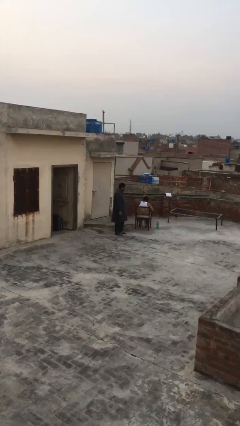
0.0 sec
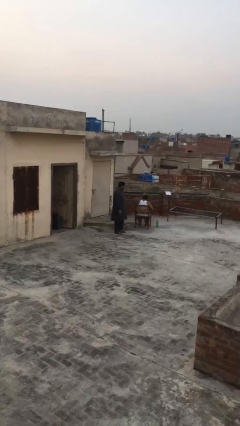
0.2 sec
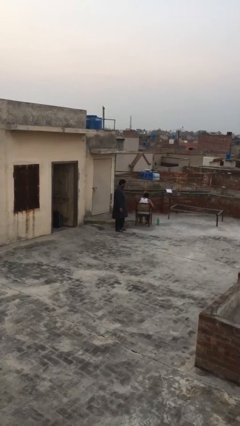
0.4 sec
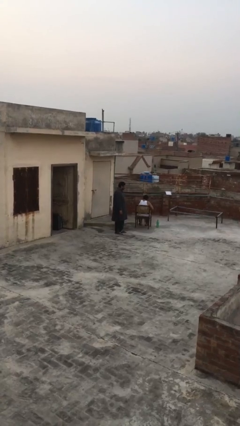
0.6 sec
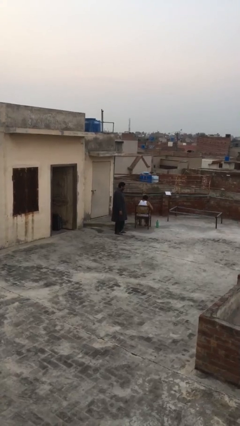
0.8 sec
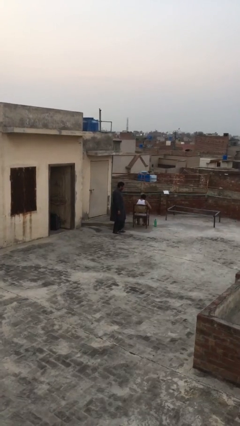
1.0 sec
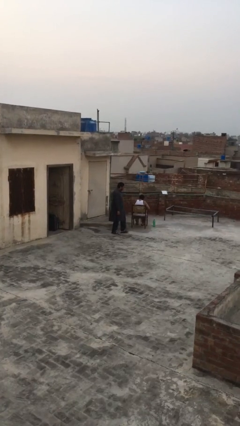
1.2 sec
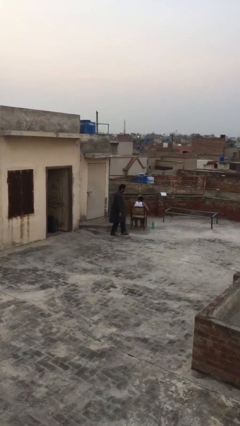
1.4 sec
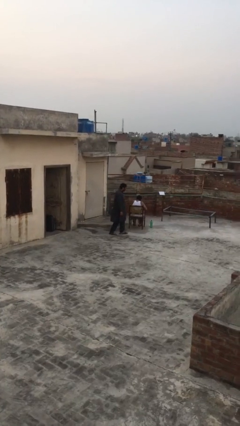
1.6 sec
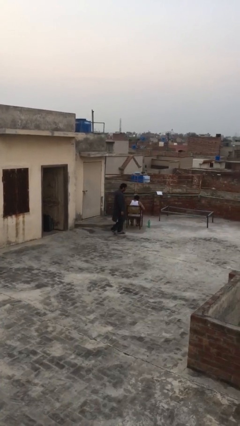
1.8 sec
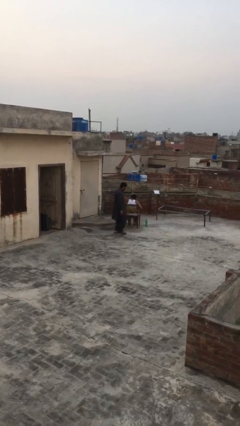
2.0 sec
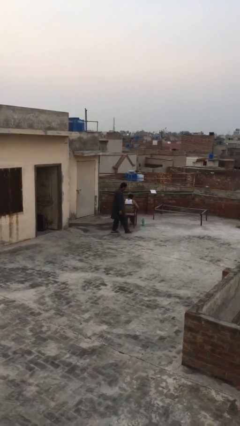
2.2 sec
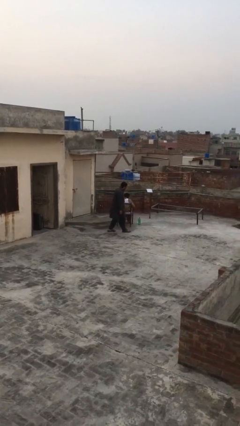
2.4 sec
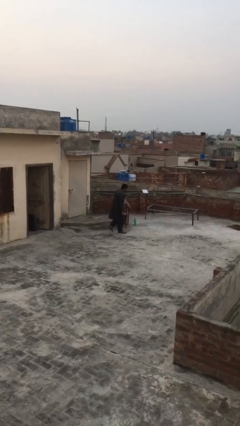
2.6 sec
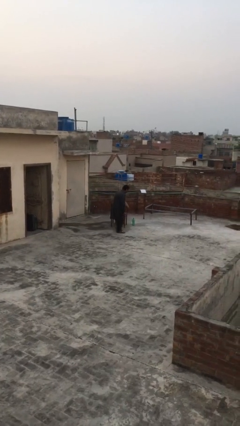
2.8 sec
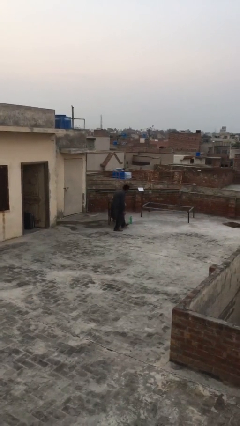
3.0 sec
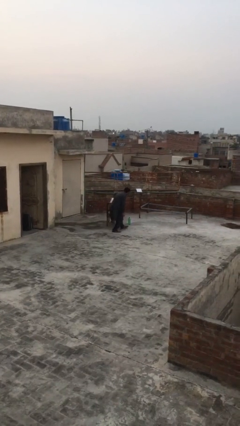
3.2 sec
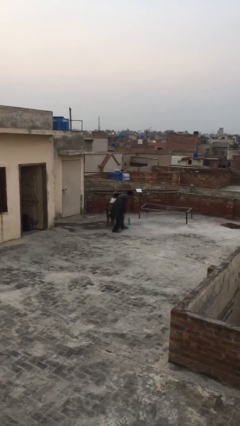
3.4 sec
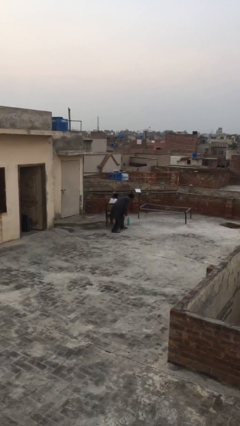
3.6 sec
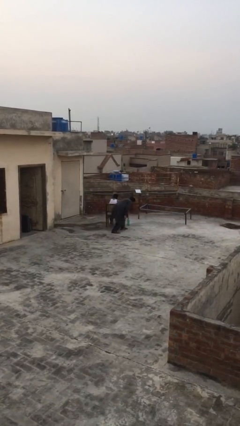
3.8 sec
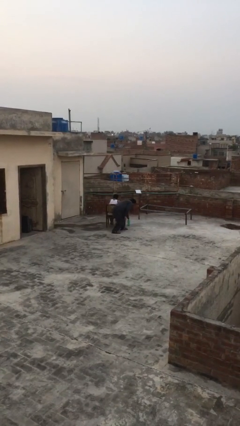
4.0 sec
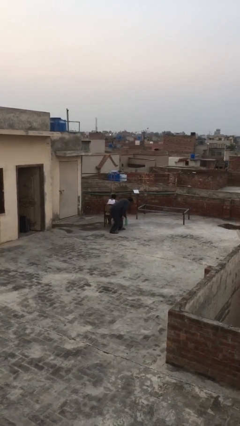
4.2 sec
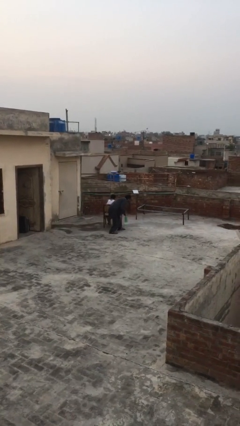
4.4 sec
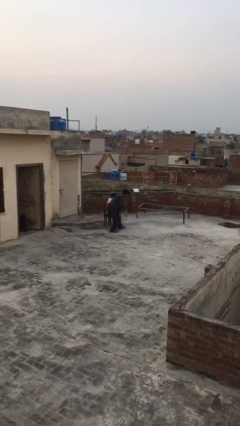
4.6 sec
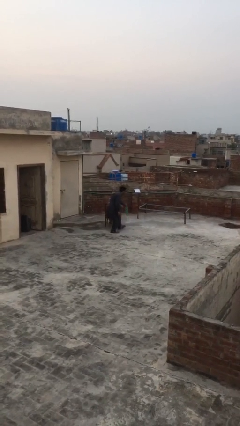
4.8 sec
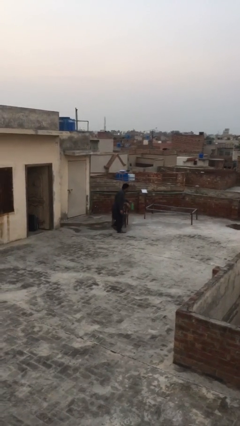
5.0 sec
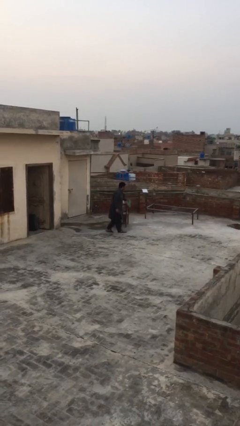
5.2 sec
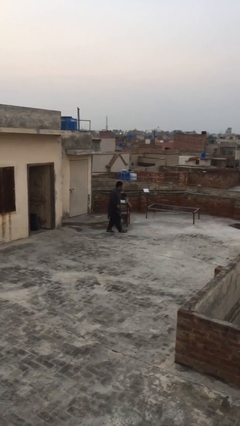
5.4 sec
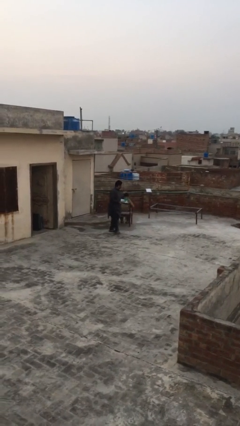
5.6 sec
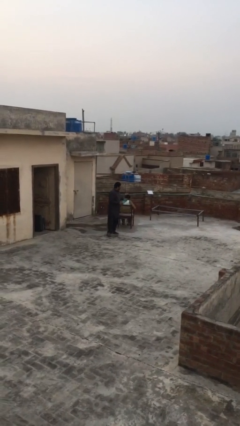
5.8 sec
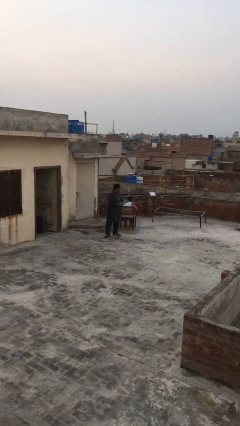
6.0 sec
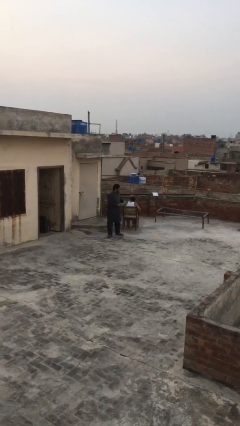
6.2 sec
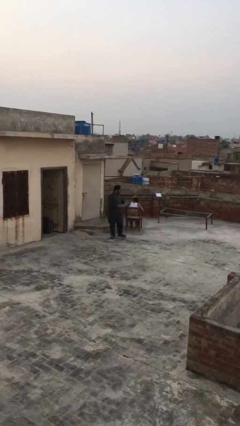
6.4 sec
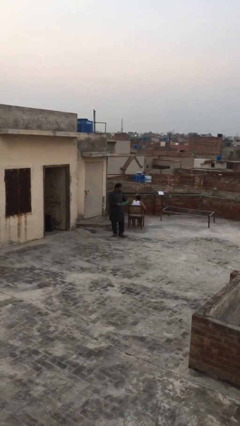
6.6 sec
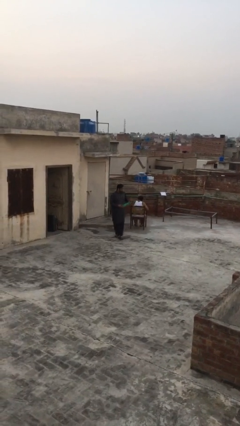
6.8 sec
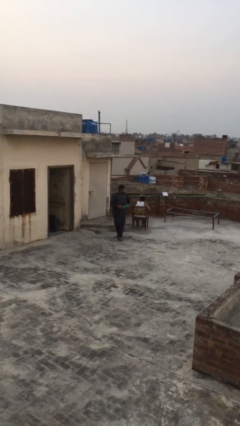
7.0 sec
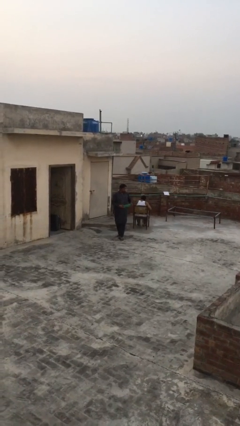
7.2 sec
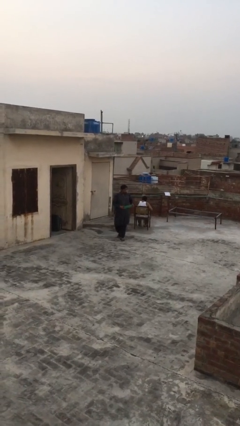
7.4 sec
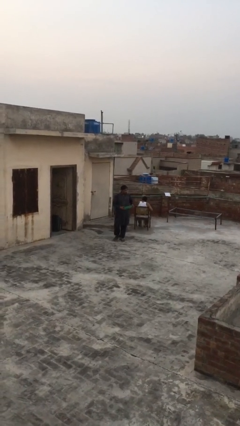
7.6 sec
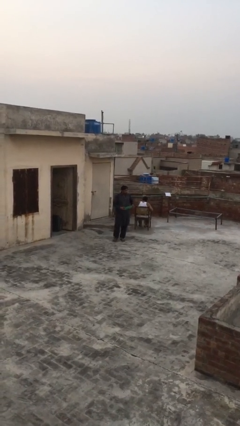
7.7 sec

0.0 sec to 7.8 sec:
person steals object from person

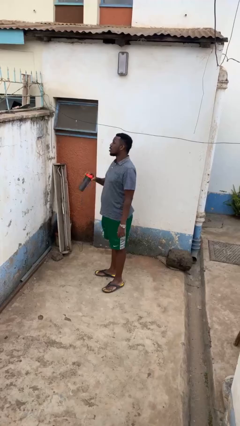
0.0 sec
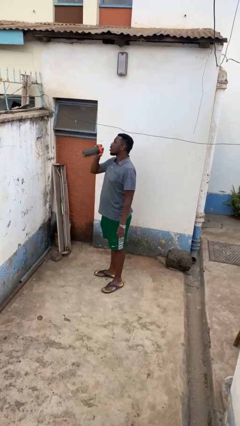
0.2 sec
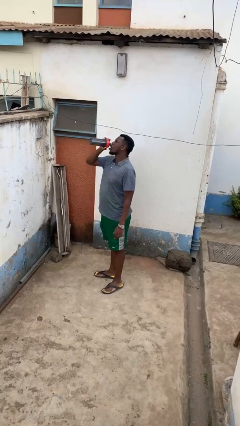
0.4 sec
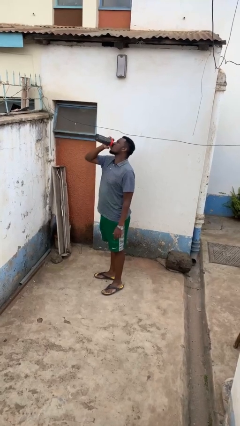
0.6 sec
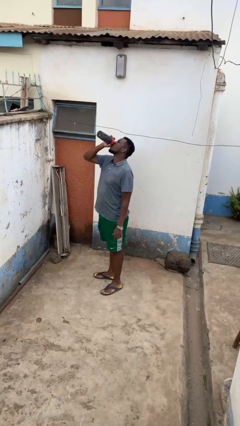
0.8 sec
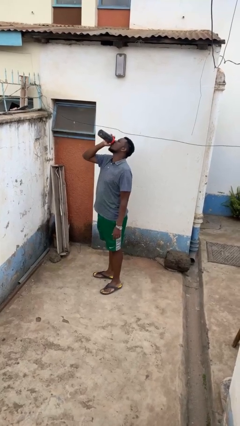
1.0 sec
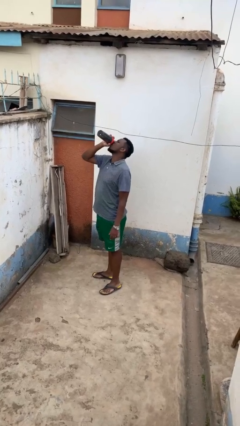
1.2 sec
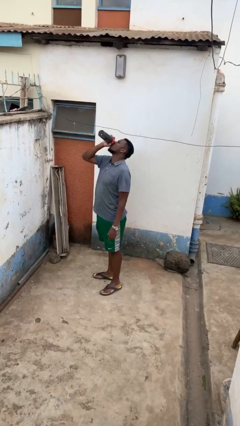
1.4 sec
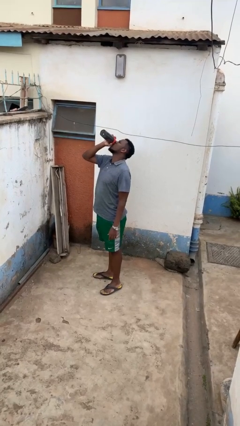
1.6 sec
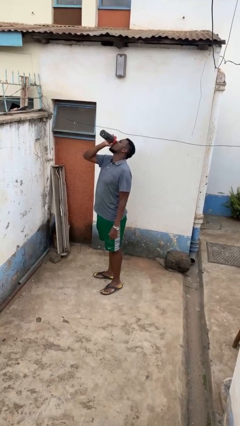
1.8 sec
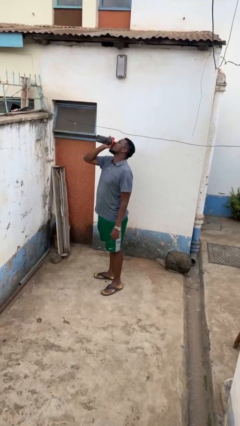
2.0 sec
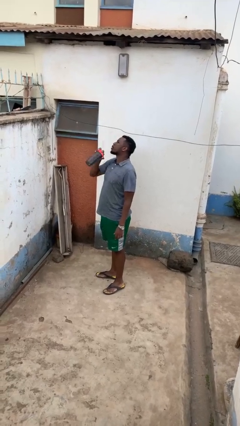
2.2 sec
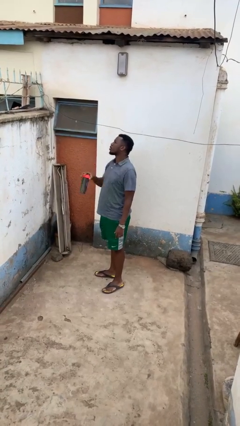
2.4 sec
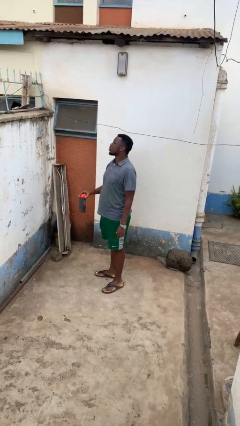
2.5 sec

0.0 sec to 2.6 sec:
person drinks from bottle

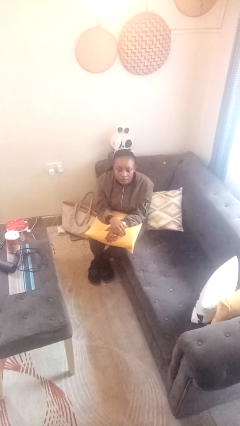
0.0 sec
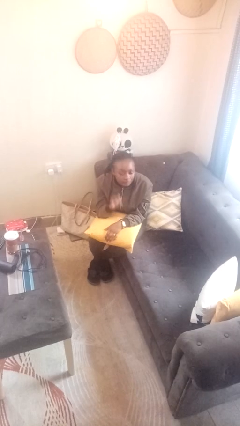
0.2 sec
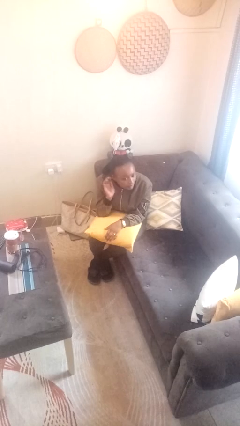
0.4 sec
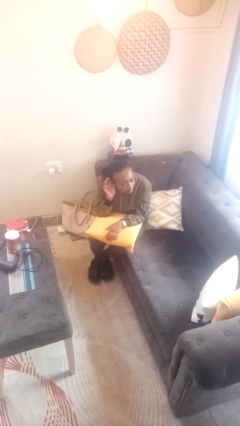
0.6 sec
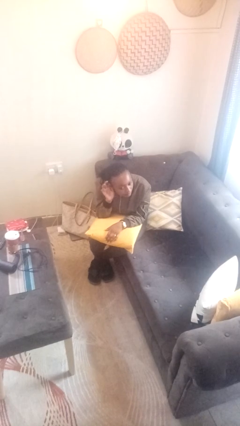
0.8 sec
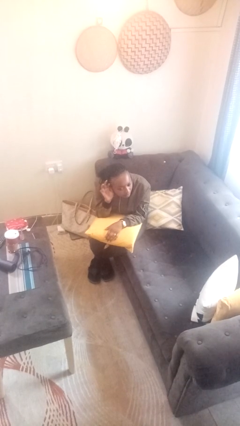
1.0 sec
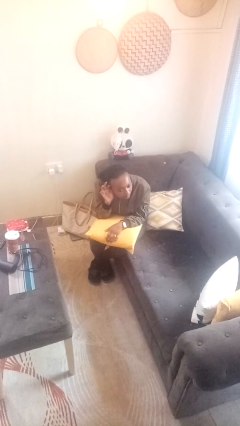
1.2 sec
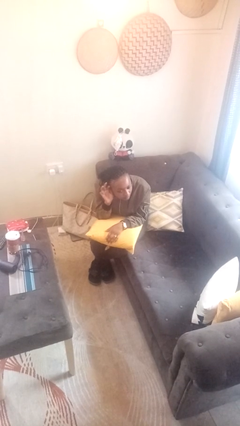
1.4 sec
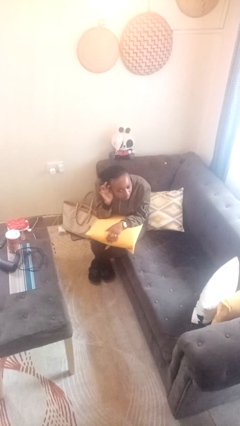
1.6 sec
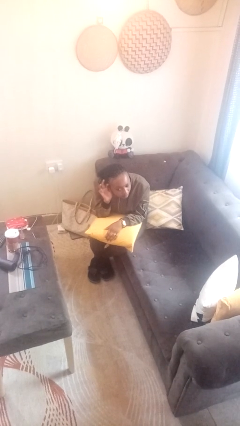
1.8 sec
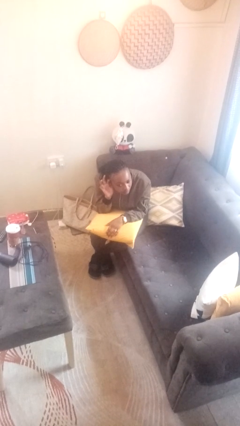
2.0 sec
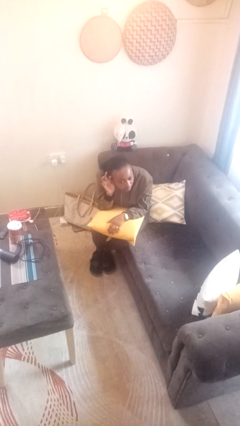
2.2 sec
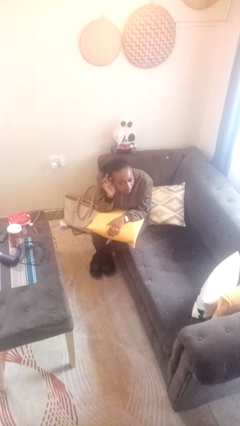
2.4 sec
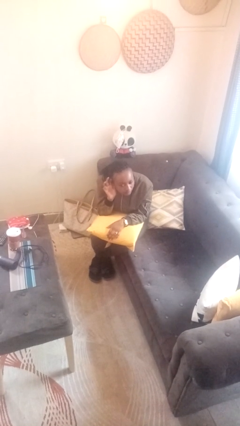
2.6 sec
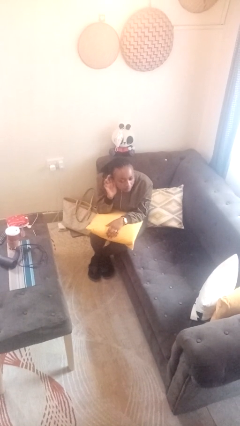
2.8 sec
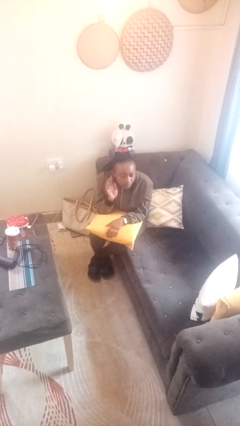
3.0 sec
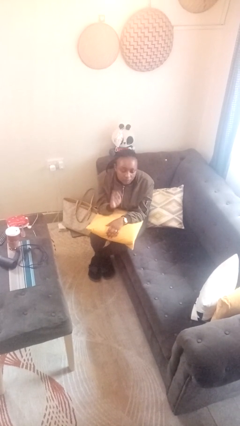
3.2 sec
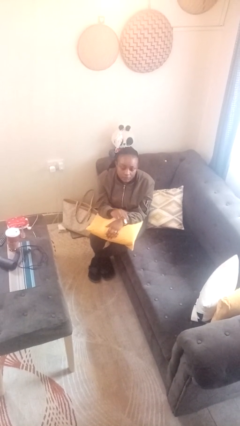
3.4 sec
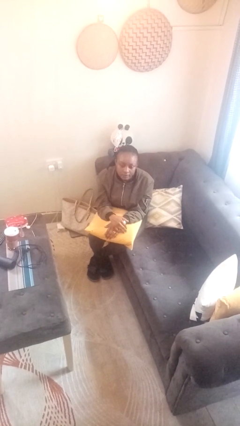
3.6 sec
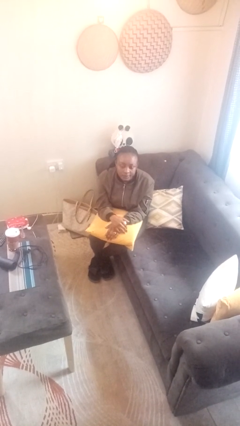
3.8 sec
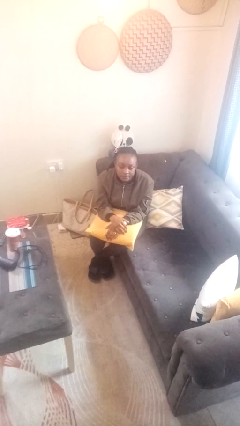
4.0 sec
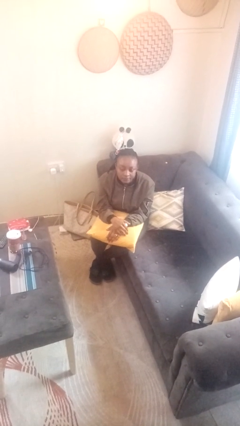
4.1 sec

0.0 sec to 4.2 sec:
person gestures listen closely

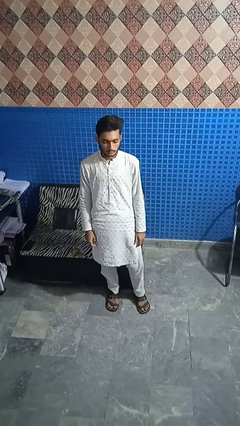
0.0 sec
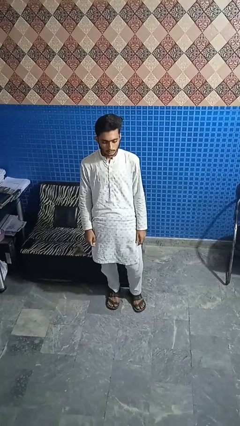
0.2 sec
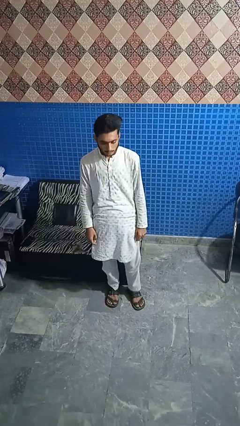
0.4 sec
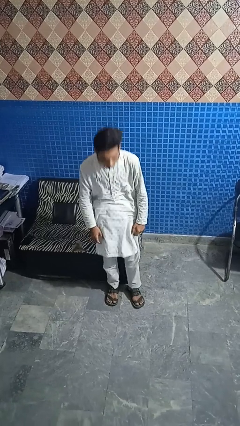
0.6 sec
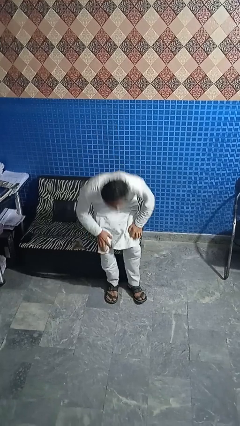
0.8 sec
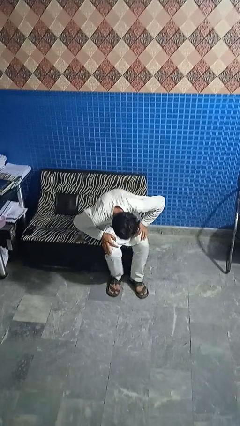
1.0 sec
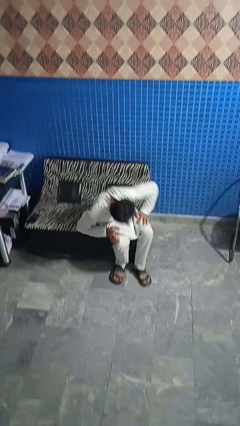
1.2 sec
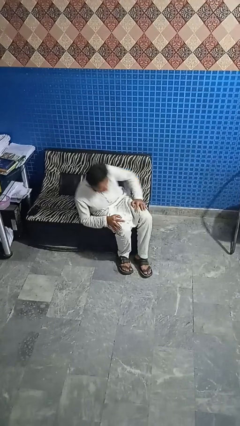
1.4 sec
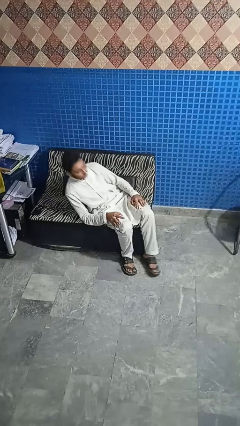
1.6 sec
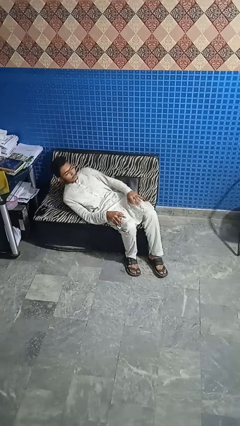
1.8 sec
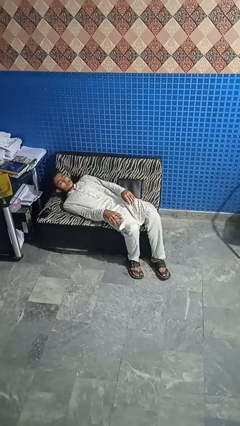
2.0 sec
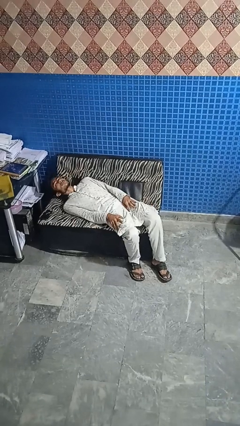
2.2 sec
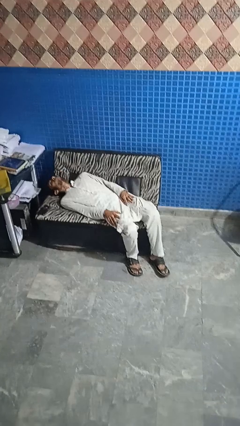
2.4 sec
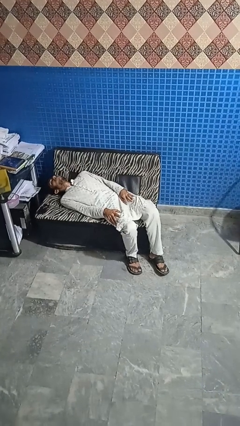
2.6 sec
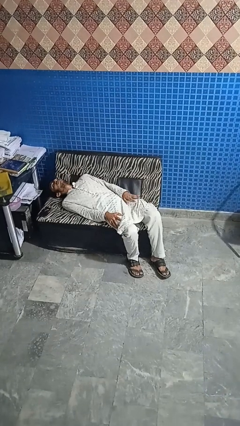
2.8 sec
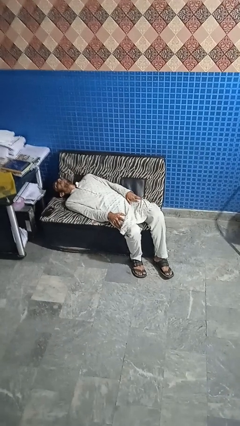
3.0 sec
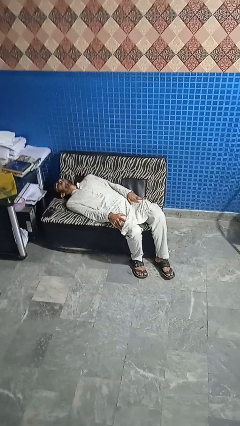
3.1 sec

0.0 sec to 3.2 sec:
person lies down on couch
